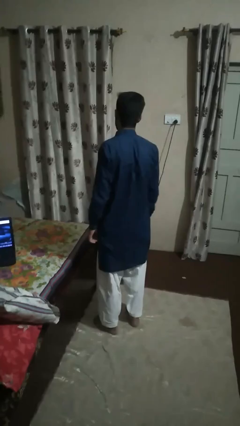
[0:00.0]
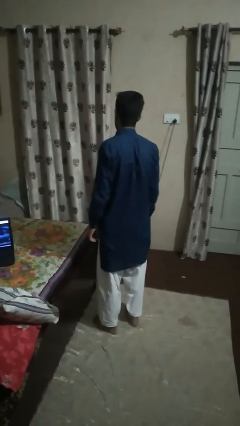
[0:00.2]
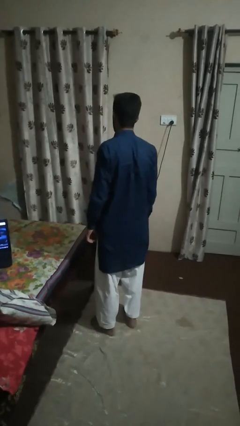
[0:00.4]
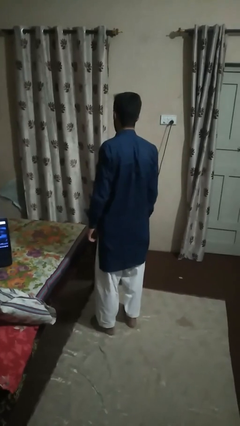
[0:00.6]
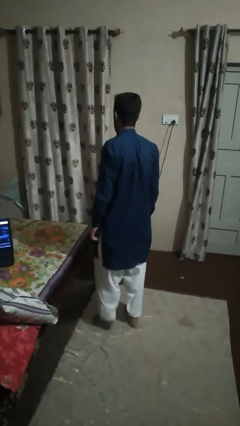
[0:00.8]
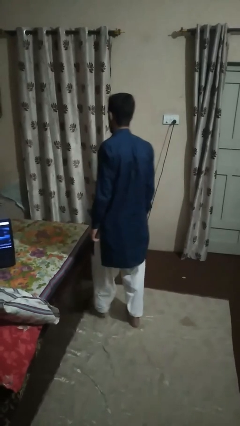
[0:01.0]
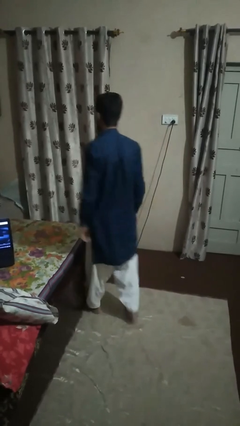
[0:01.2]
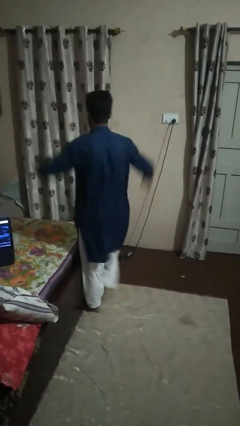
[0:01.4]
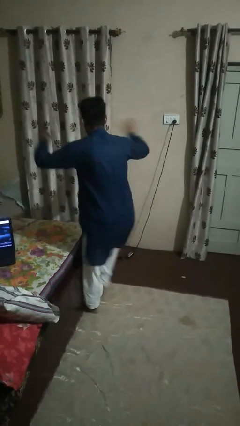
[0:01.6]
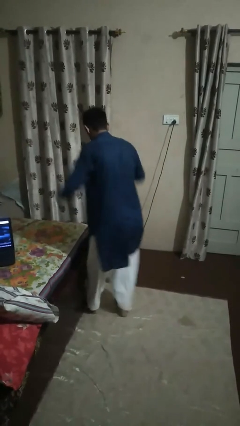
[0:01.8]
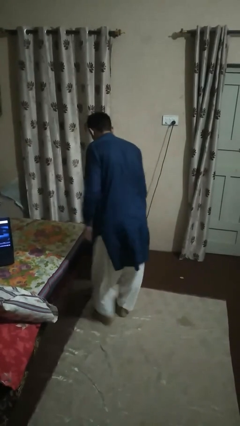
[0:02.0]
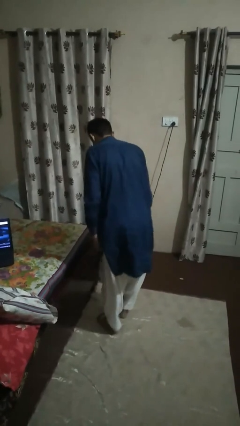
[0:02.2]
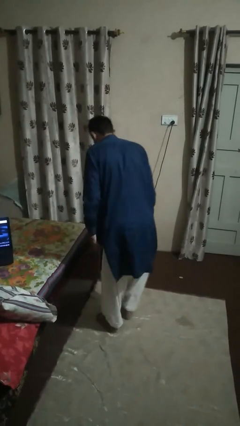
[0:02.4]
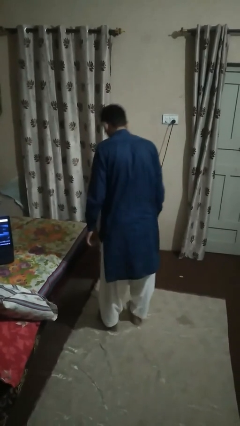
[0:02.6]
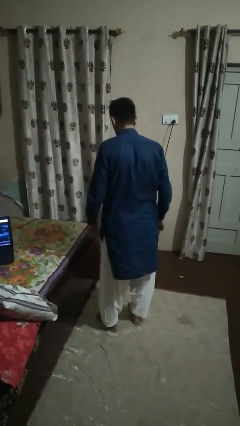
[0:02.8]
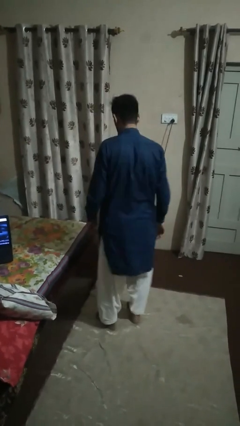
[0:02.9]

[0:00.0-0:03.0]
person stubs toe

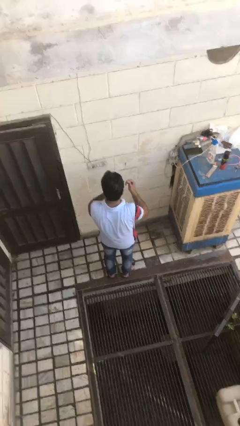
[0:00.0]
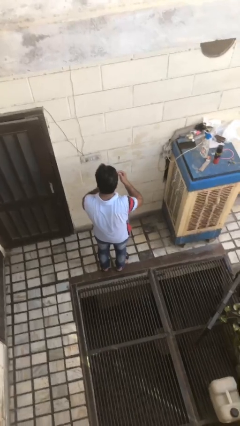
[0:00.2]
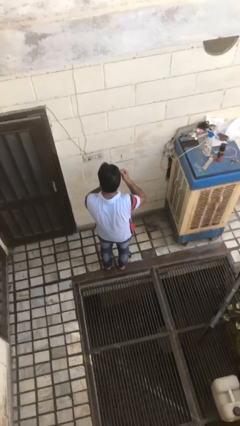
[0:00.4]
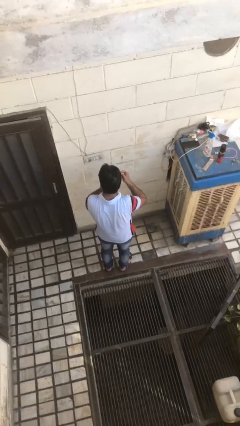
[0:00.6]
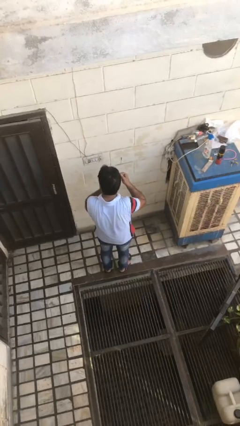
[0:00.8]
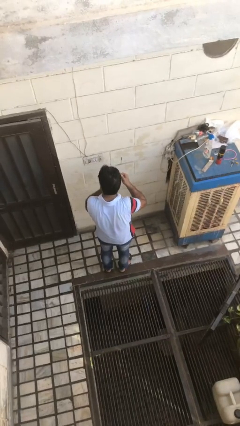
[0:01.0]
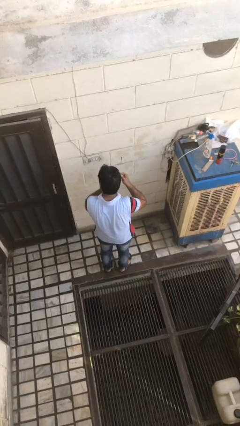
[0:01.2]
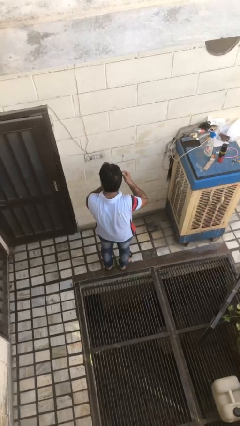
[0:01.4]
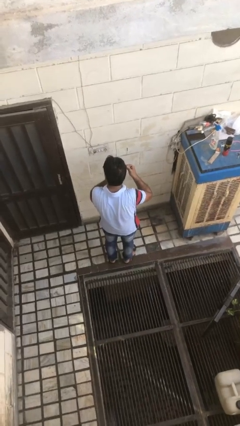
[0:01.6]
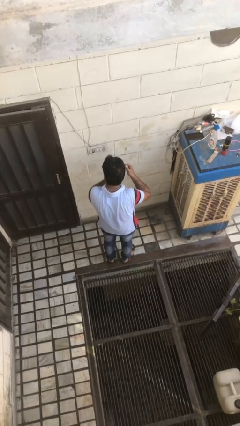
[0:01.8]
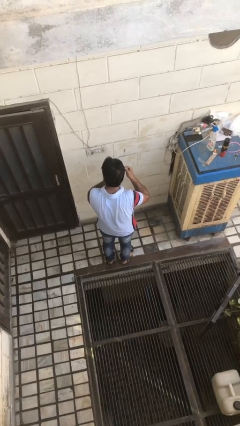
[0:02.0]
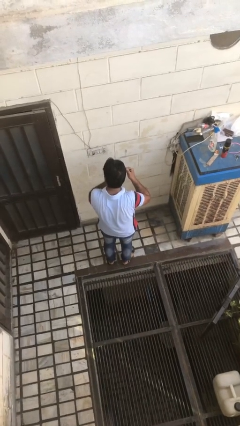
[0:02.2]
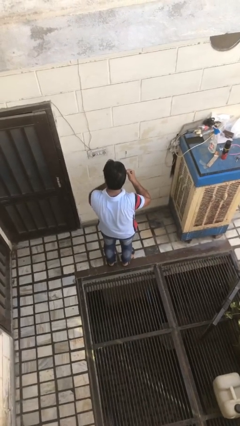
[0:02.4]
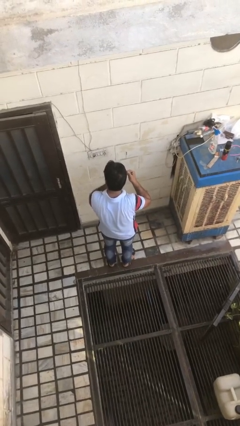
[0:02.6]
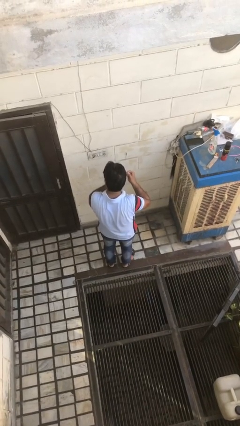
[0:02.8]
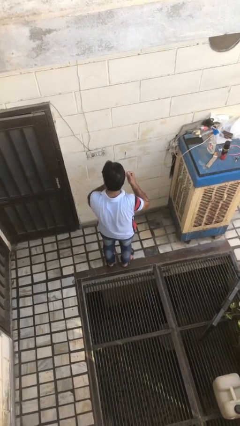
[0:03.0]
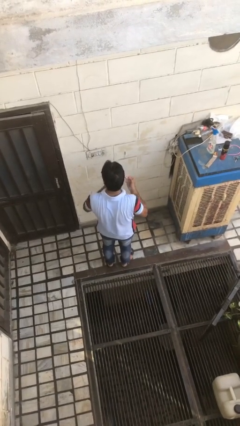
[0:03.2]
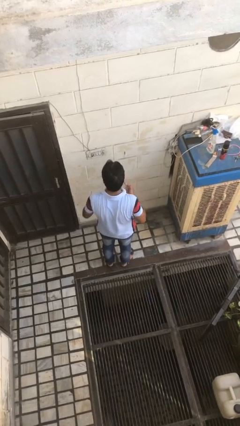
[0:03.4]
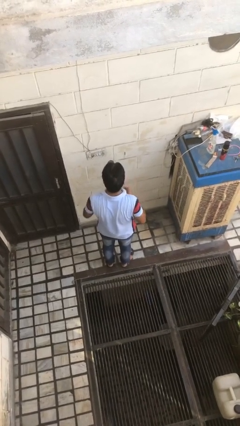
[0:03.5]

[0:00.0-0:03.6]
person applies eye makeup

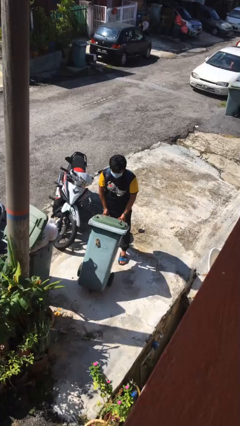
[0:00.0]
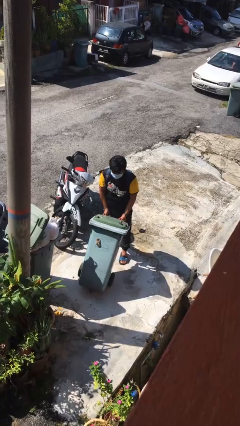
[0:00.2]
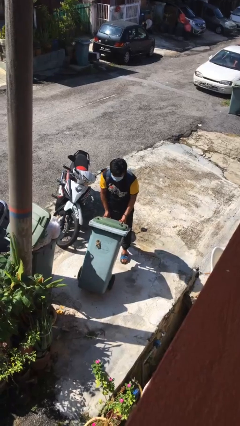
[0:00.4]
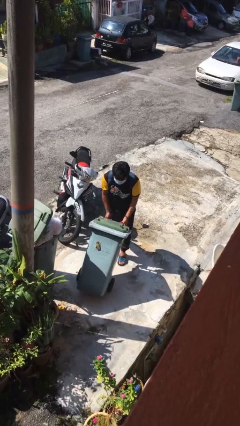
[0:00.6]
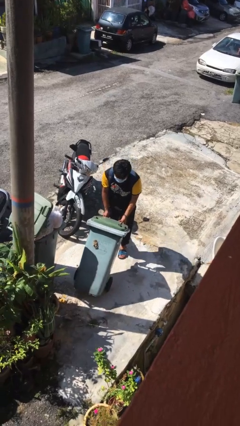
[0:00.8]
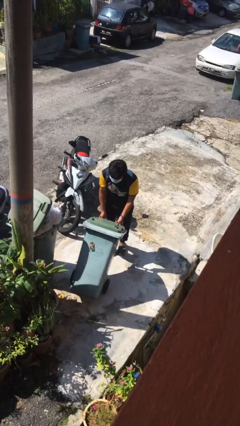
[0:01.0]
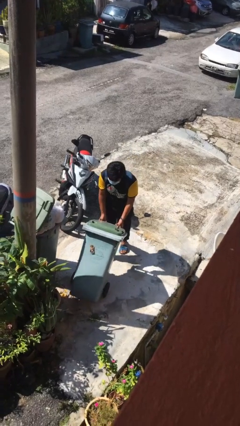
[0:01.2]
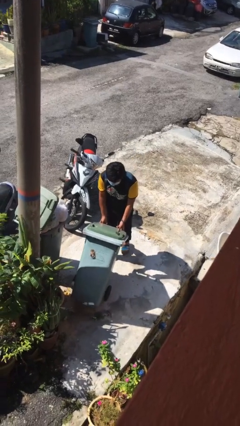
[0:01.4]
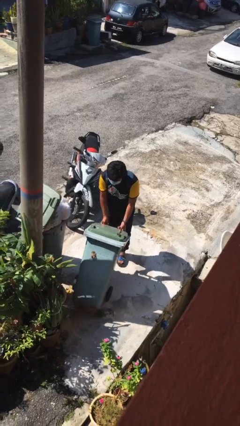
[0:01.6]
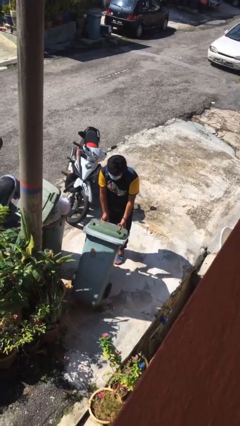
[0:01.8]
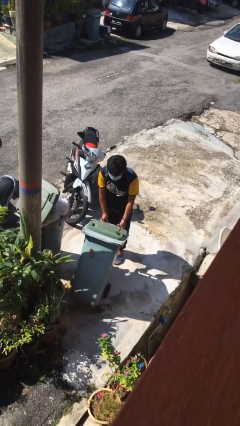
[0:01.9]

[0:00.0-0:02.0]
person pushes wheeled trashcan

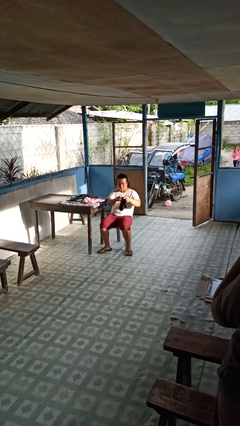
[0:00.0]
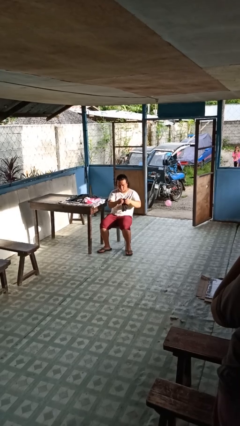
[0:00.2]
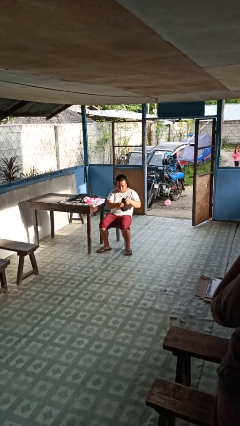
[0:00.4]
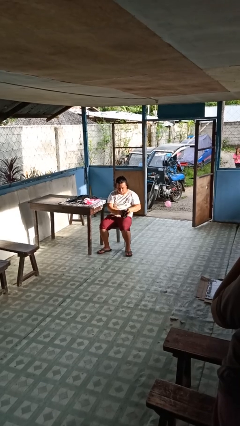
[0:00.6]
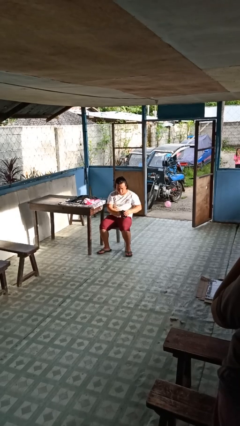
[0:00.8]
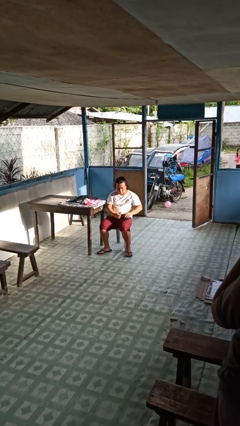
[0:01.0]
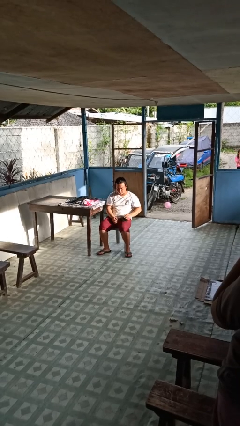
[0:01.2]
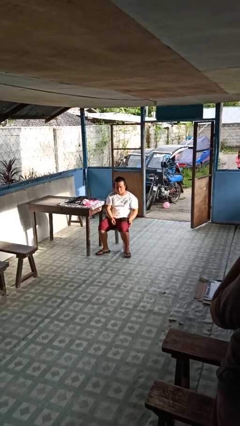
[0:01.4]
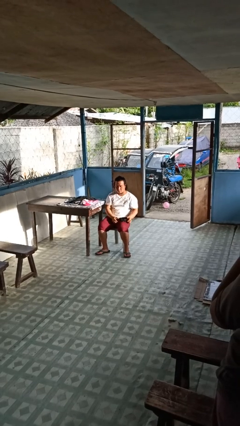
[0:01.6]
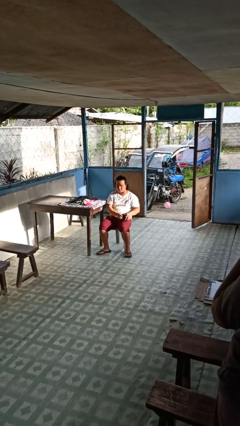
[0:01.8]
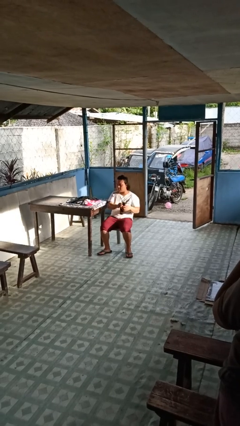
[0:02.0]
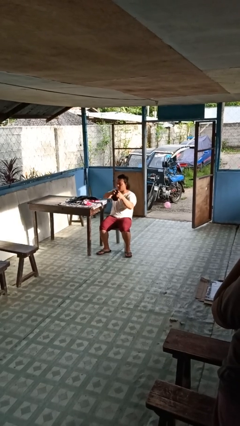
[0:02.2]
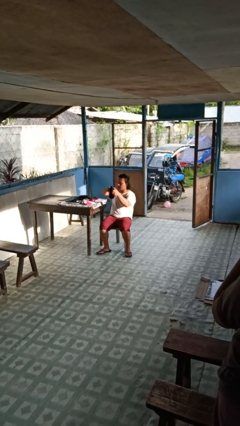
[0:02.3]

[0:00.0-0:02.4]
person folds socks

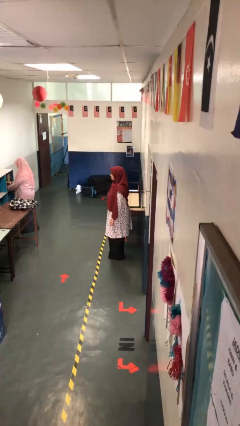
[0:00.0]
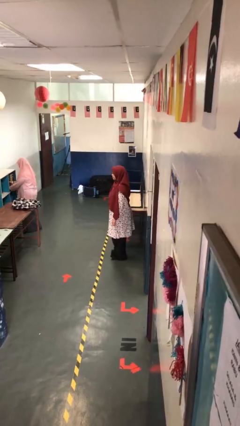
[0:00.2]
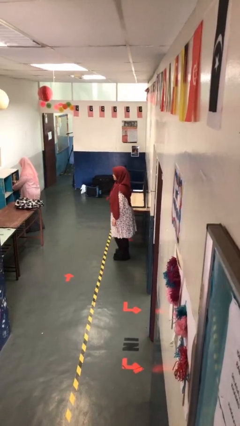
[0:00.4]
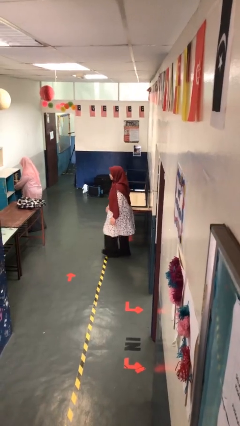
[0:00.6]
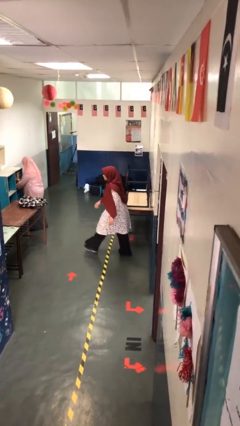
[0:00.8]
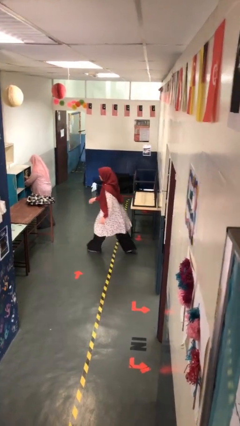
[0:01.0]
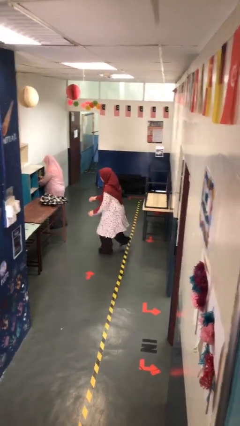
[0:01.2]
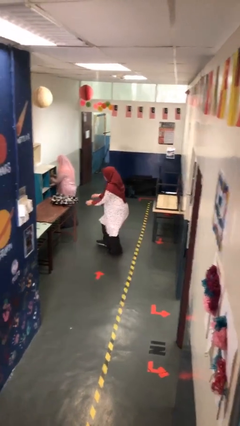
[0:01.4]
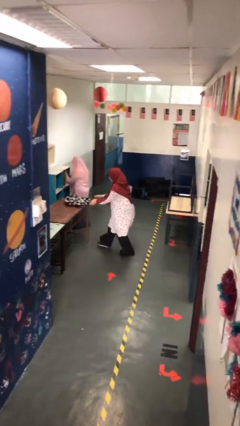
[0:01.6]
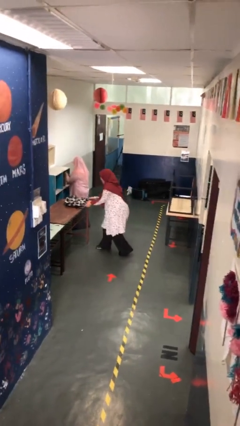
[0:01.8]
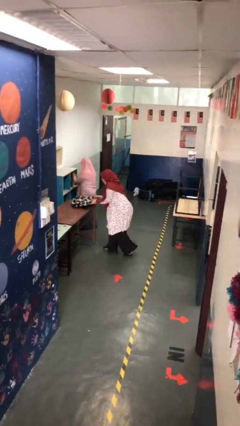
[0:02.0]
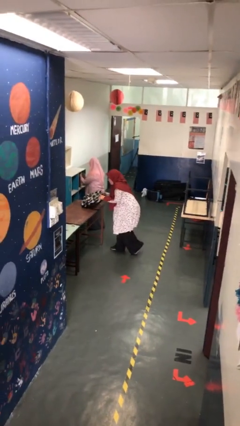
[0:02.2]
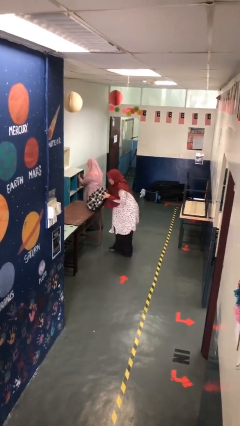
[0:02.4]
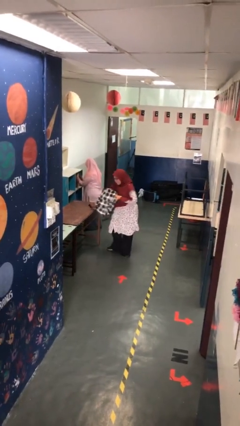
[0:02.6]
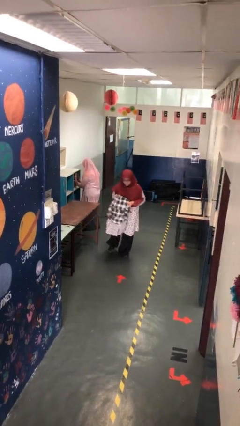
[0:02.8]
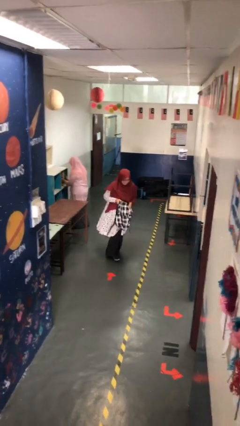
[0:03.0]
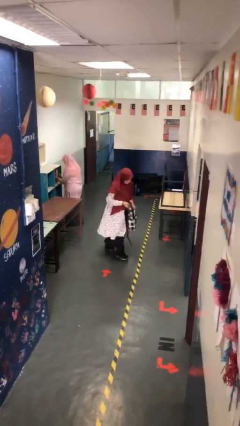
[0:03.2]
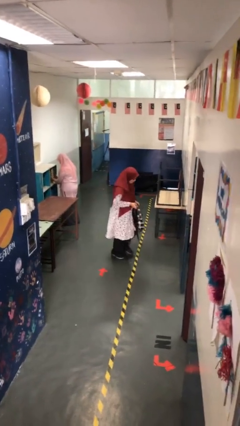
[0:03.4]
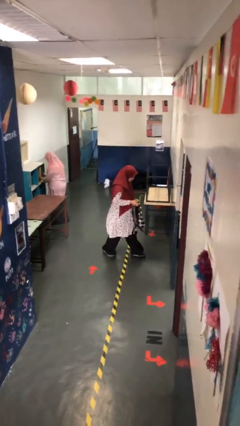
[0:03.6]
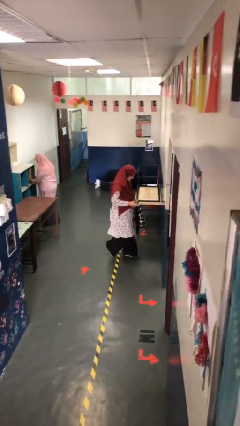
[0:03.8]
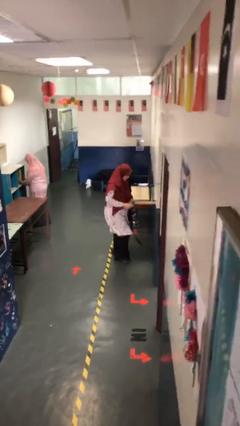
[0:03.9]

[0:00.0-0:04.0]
person steals object from person

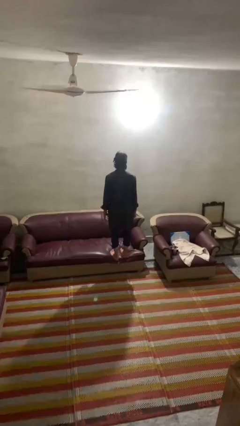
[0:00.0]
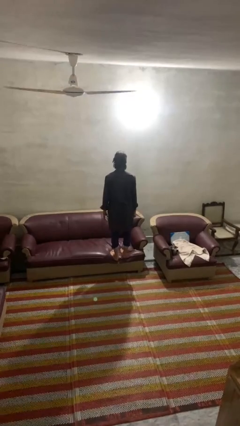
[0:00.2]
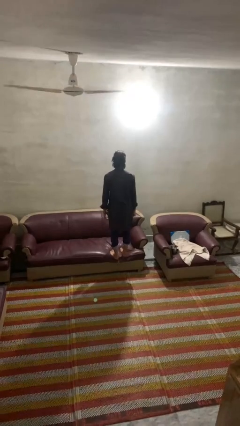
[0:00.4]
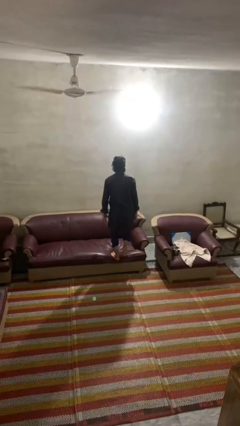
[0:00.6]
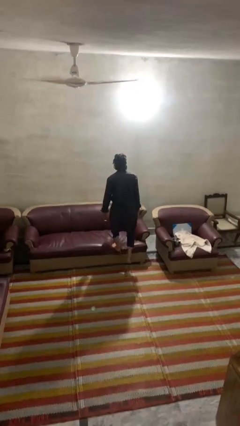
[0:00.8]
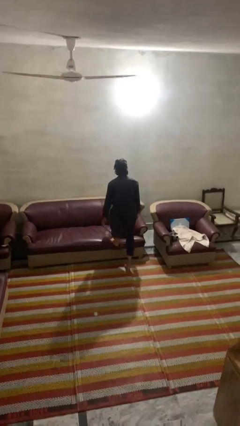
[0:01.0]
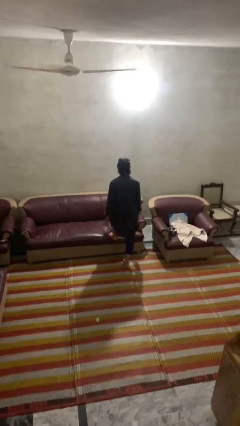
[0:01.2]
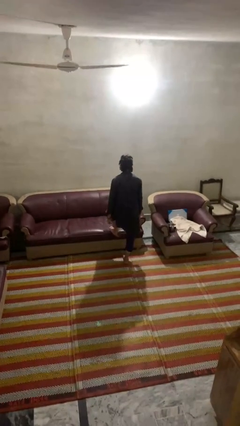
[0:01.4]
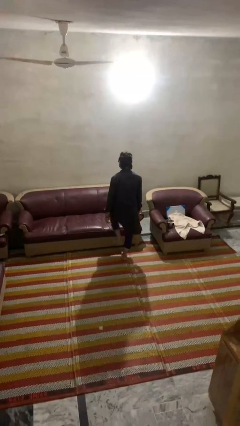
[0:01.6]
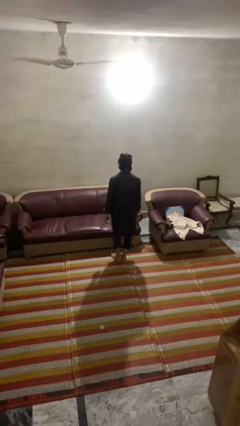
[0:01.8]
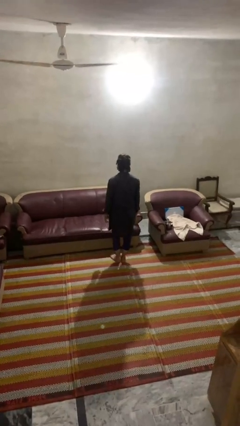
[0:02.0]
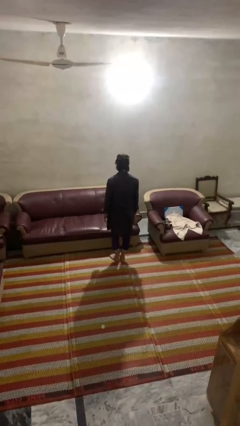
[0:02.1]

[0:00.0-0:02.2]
person climbs off couch

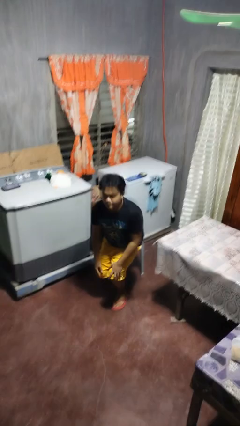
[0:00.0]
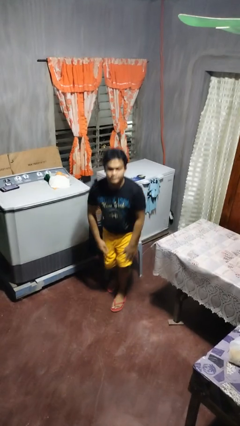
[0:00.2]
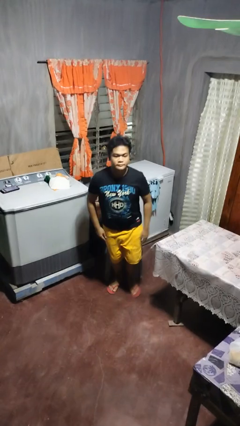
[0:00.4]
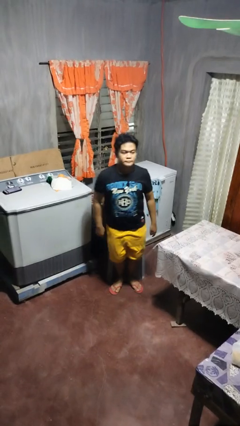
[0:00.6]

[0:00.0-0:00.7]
person stands up from floor
